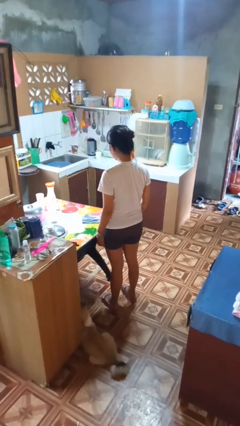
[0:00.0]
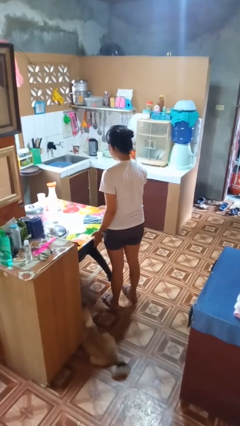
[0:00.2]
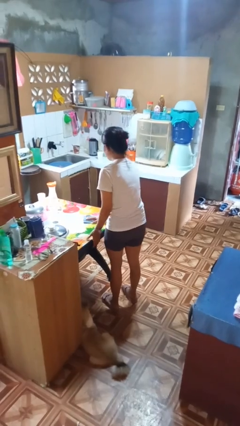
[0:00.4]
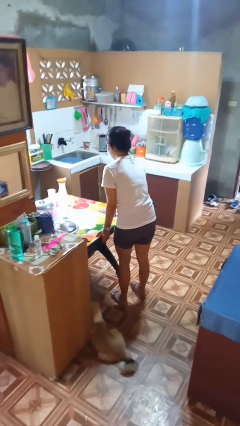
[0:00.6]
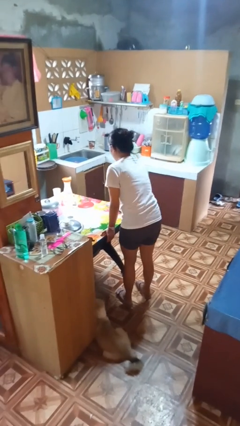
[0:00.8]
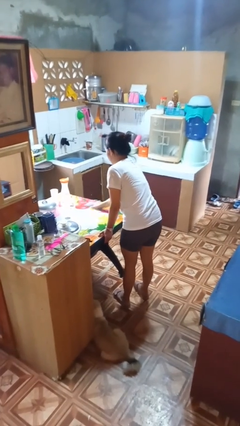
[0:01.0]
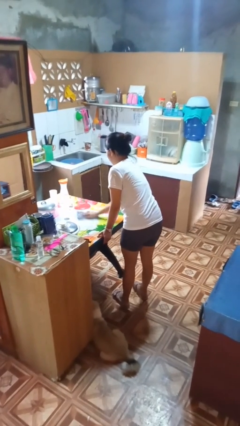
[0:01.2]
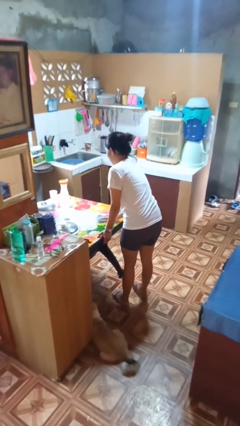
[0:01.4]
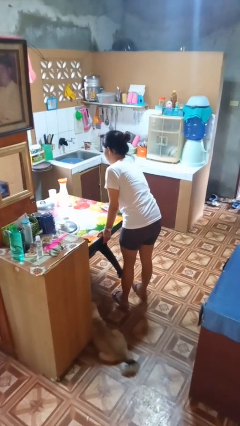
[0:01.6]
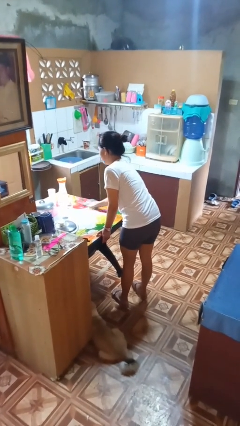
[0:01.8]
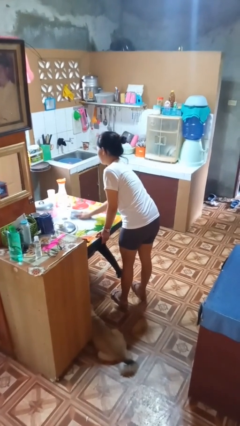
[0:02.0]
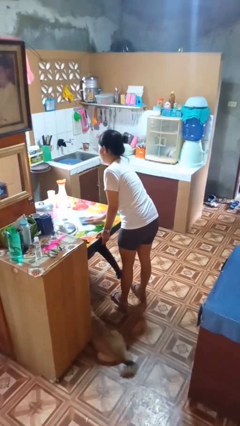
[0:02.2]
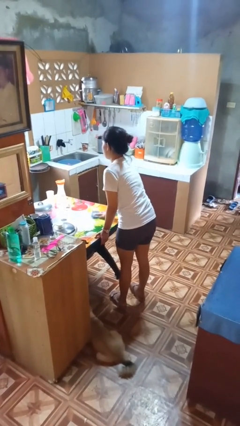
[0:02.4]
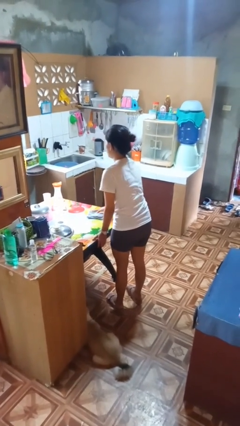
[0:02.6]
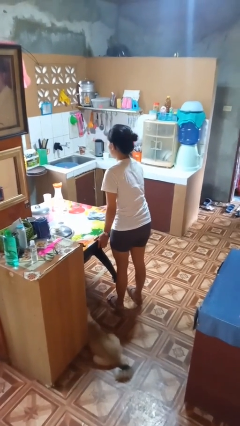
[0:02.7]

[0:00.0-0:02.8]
person cleans table with rag

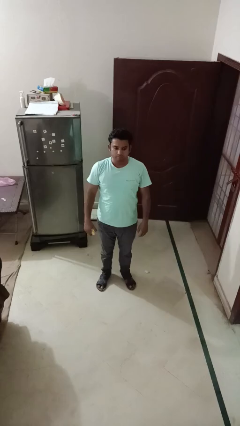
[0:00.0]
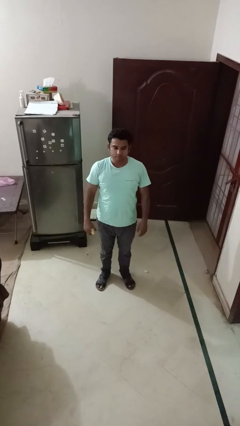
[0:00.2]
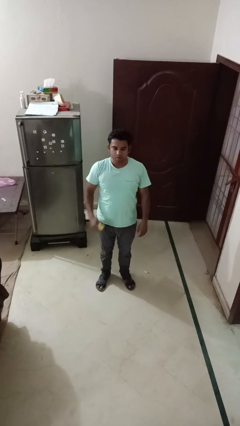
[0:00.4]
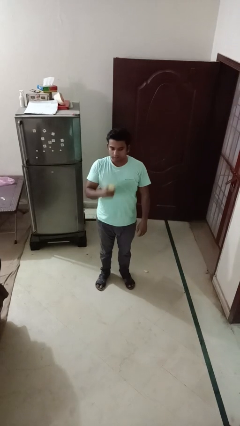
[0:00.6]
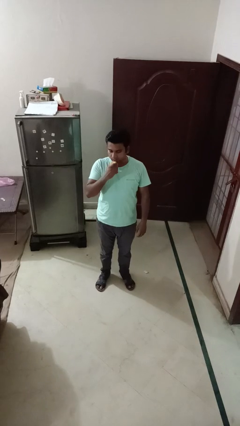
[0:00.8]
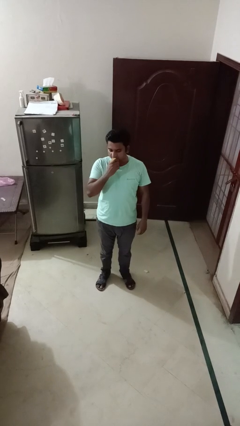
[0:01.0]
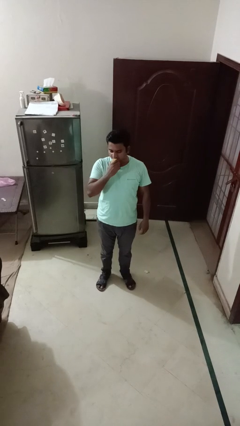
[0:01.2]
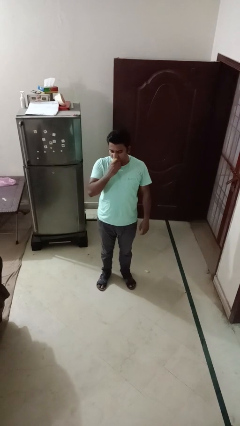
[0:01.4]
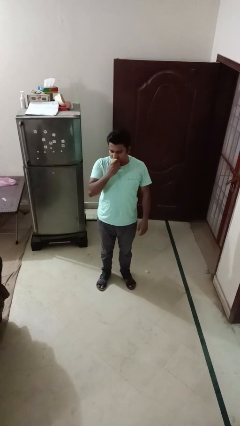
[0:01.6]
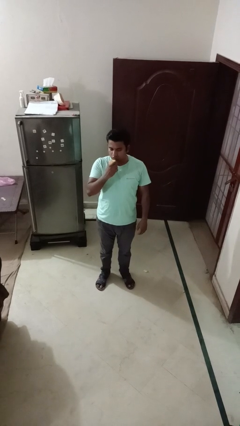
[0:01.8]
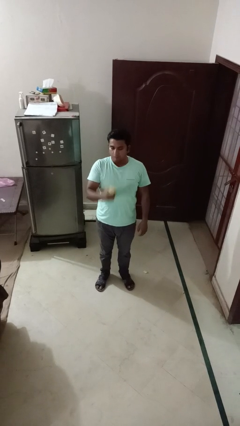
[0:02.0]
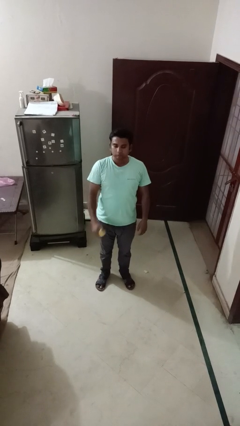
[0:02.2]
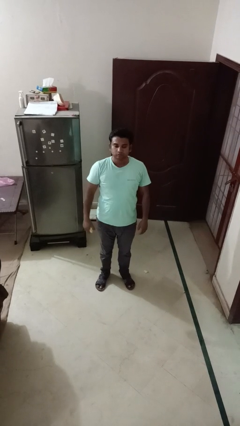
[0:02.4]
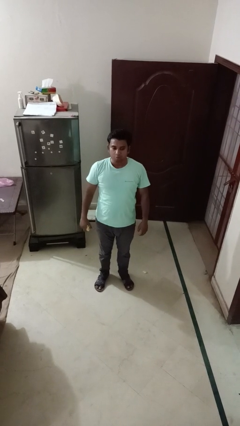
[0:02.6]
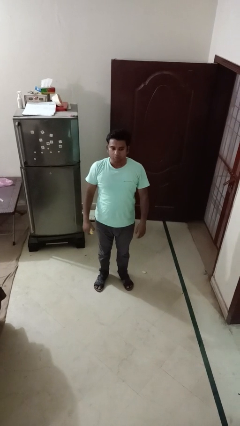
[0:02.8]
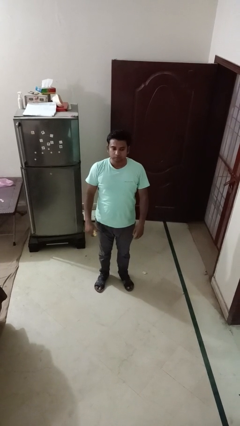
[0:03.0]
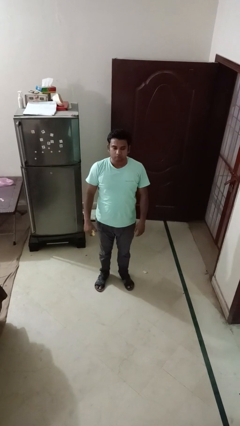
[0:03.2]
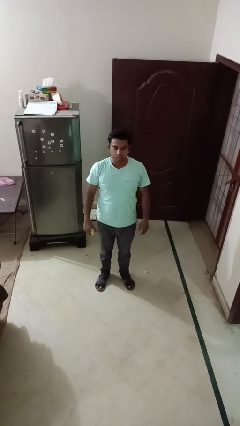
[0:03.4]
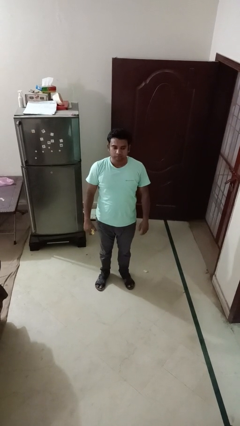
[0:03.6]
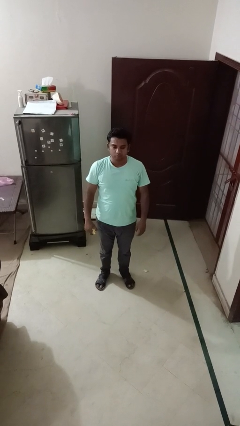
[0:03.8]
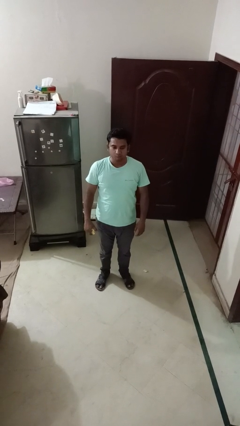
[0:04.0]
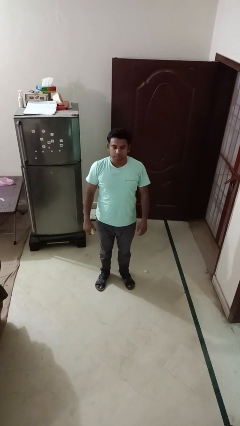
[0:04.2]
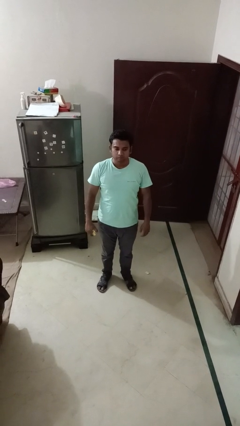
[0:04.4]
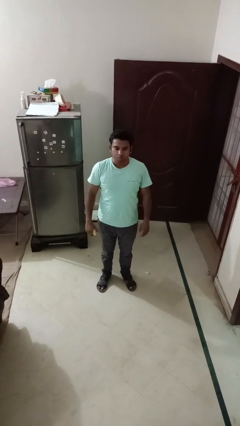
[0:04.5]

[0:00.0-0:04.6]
person eats apple

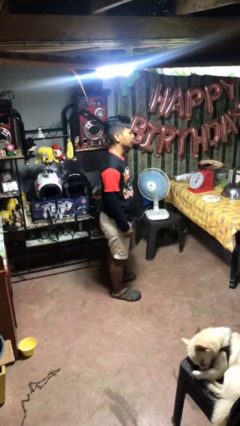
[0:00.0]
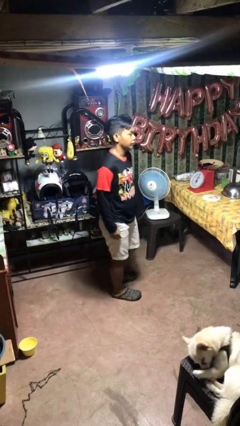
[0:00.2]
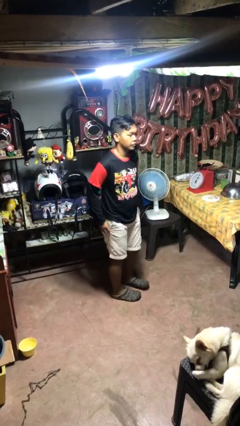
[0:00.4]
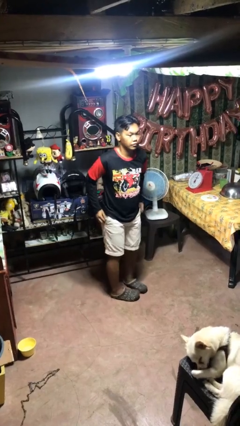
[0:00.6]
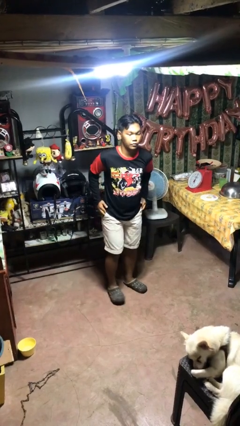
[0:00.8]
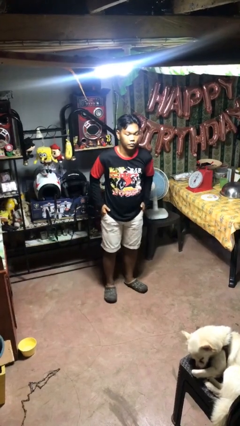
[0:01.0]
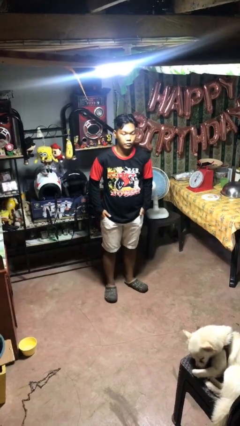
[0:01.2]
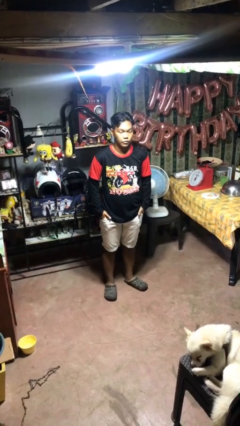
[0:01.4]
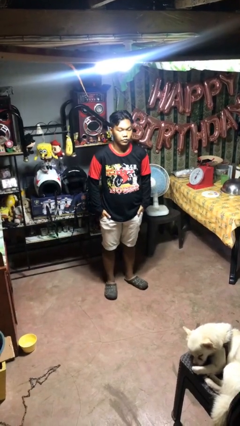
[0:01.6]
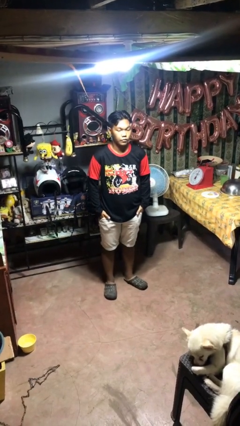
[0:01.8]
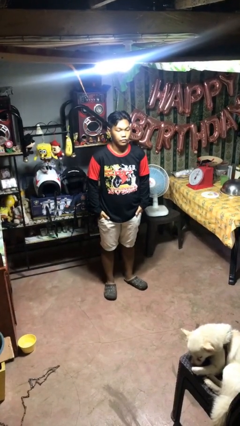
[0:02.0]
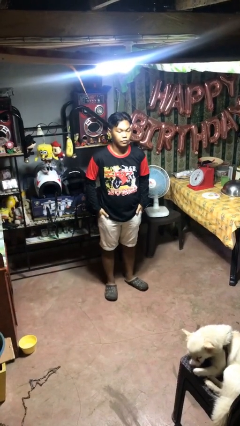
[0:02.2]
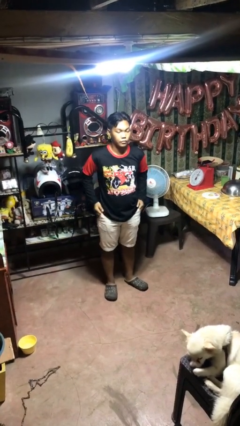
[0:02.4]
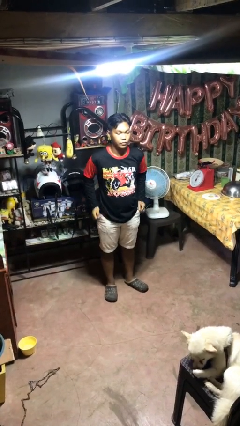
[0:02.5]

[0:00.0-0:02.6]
person puts hands in back pockets

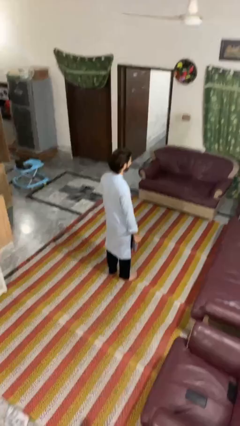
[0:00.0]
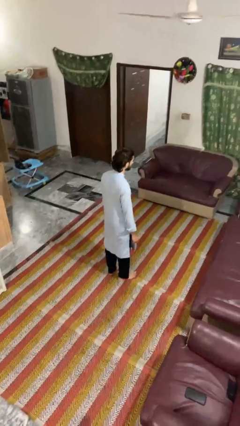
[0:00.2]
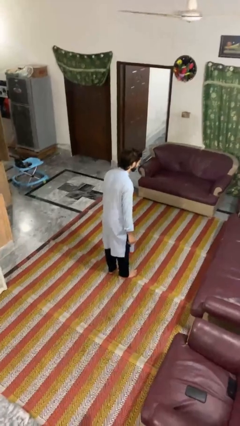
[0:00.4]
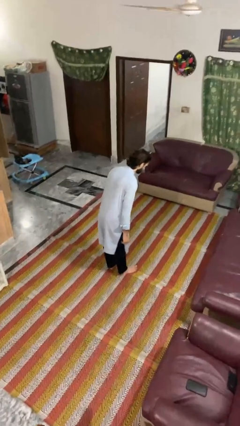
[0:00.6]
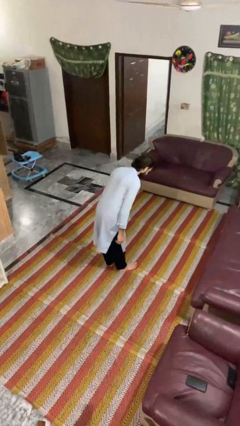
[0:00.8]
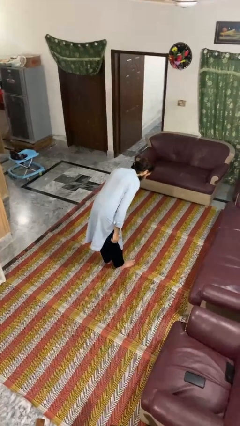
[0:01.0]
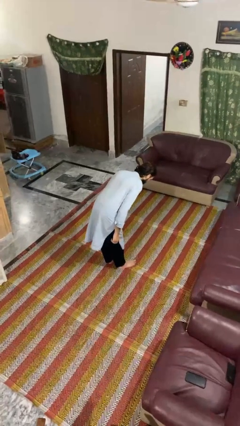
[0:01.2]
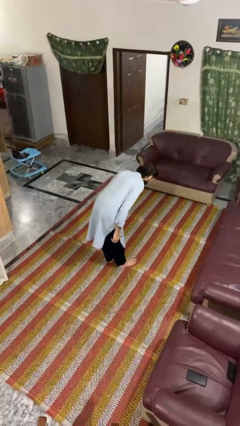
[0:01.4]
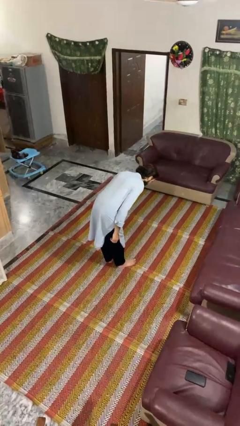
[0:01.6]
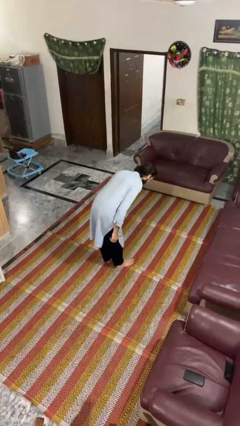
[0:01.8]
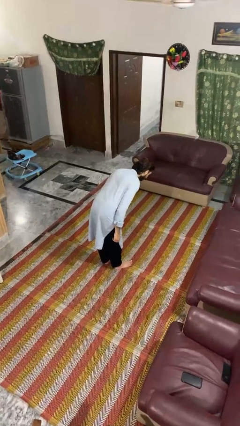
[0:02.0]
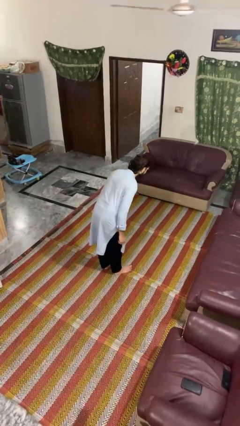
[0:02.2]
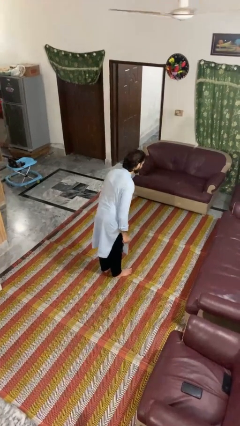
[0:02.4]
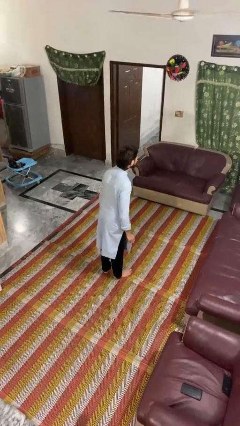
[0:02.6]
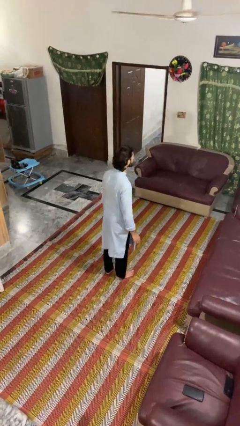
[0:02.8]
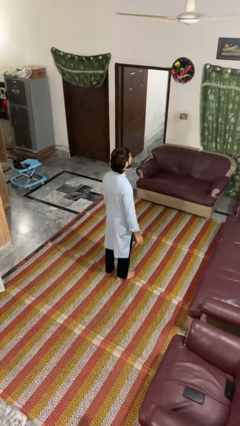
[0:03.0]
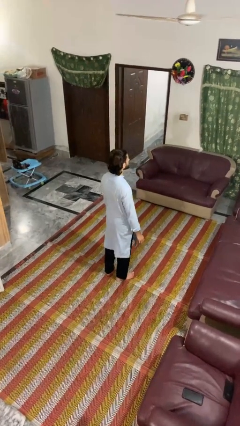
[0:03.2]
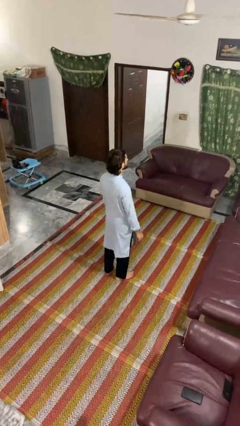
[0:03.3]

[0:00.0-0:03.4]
person bows

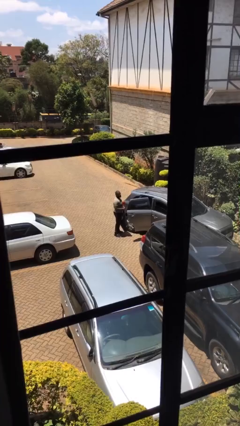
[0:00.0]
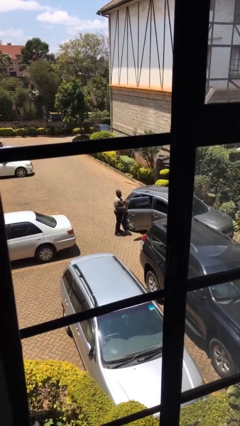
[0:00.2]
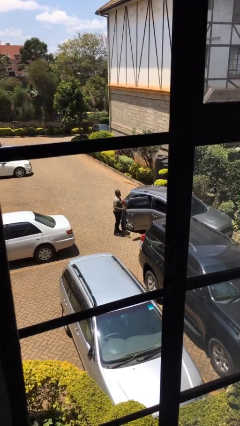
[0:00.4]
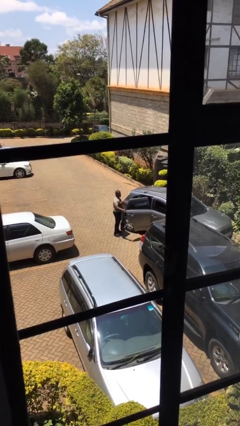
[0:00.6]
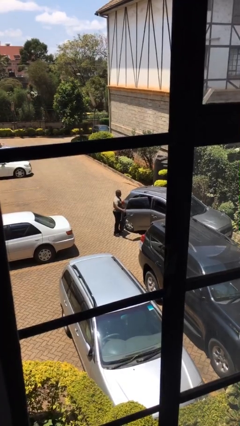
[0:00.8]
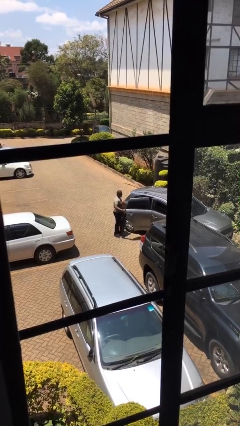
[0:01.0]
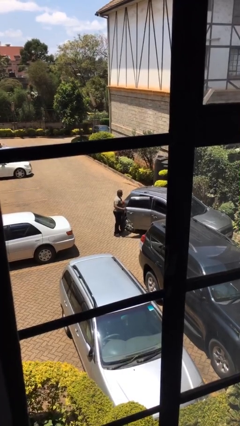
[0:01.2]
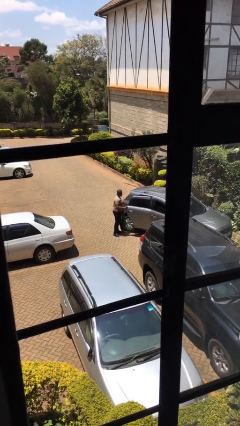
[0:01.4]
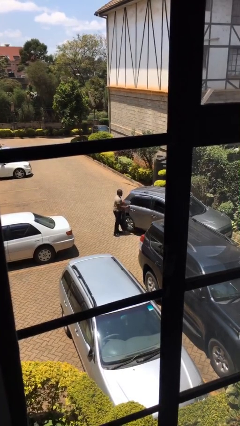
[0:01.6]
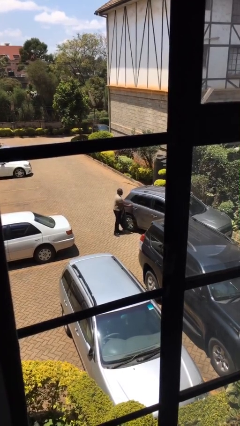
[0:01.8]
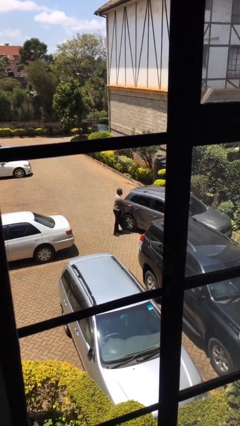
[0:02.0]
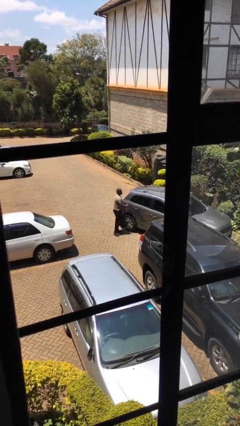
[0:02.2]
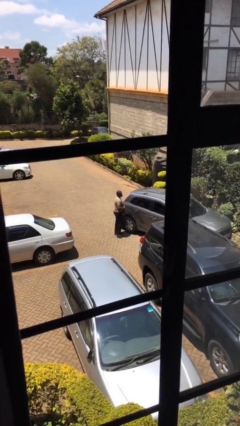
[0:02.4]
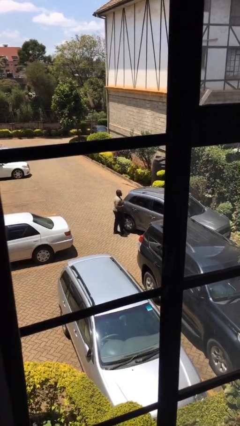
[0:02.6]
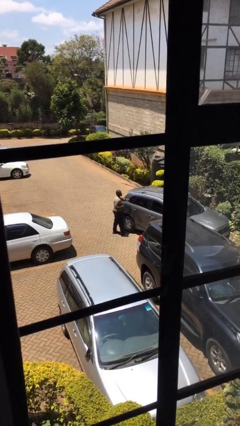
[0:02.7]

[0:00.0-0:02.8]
person closes car door

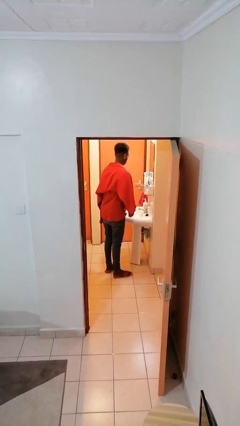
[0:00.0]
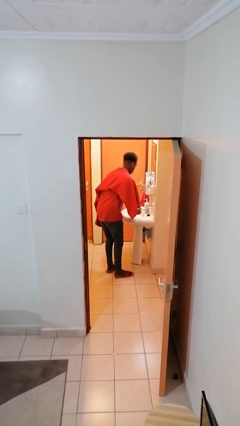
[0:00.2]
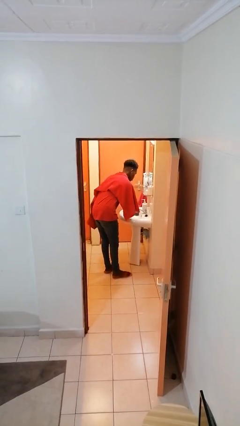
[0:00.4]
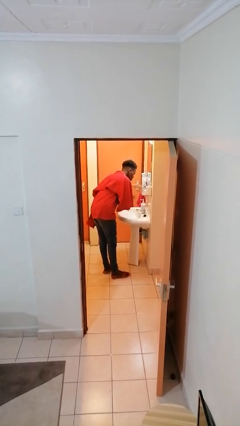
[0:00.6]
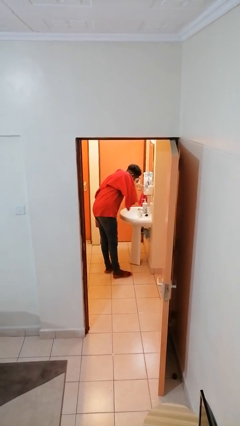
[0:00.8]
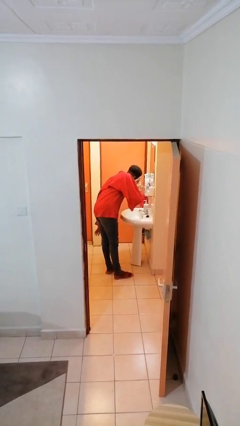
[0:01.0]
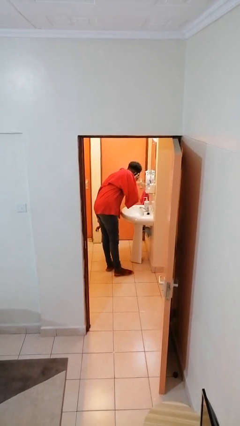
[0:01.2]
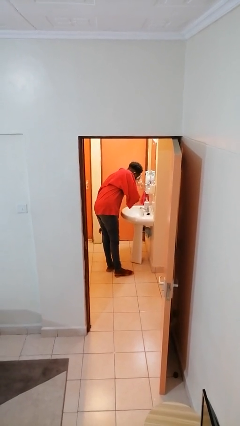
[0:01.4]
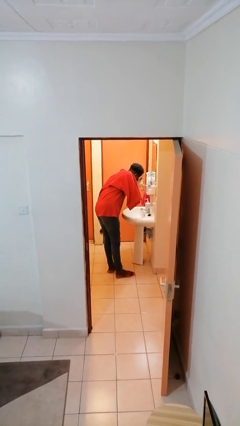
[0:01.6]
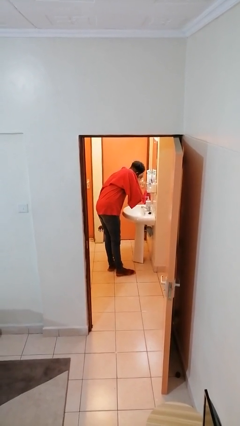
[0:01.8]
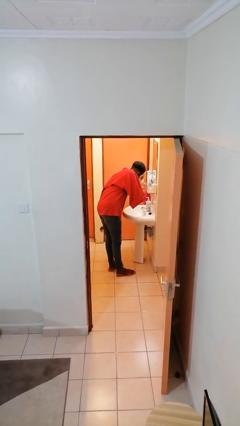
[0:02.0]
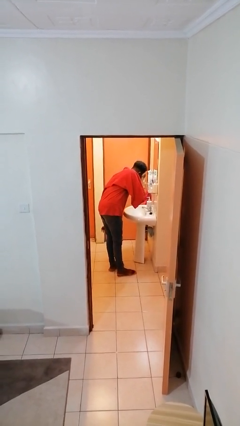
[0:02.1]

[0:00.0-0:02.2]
person washes face
